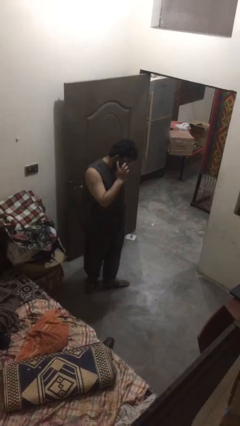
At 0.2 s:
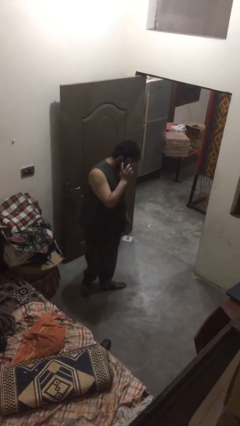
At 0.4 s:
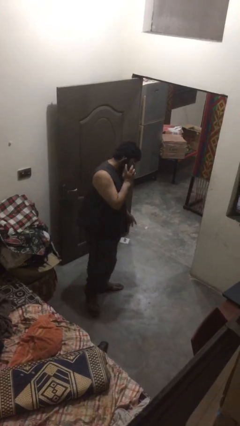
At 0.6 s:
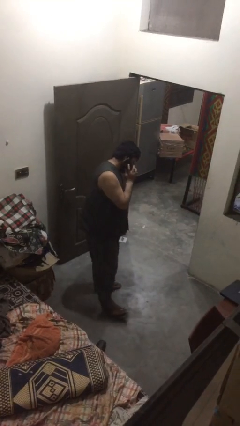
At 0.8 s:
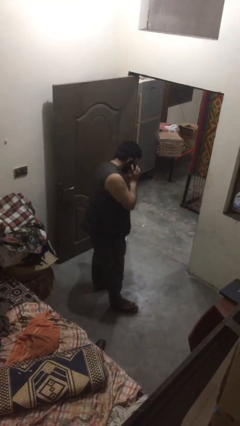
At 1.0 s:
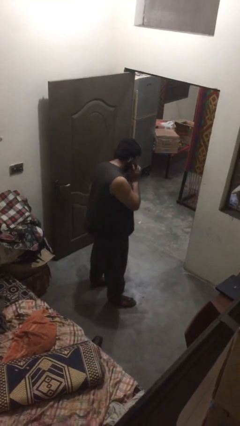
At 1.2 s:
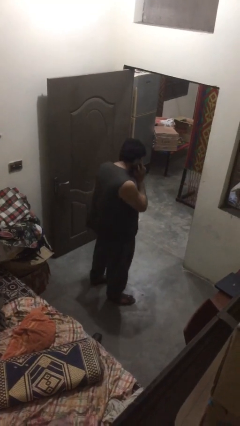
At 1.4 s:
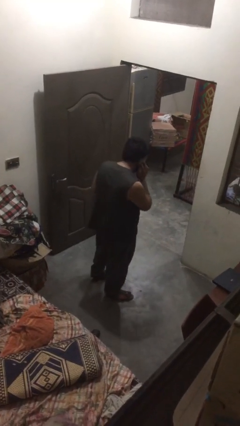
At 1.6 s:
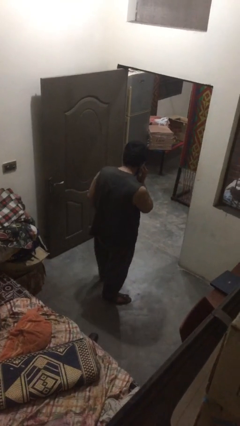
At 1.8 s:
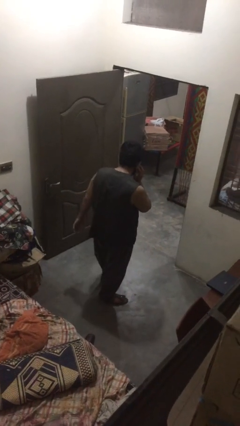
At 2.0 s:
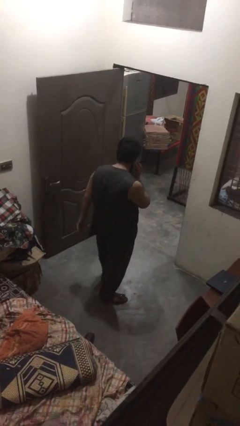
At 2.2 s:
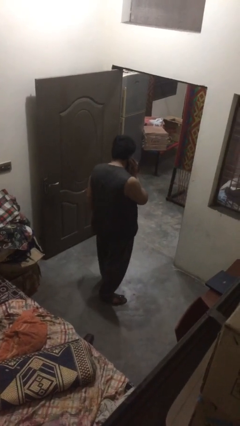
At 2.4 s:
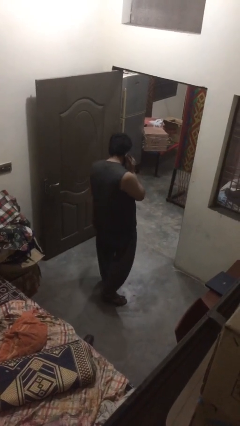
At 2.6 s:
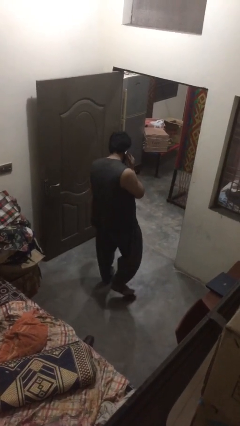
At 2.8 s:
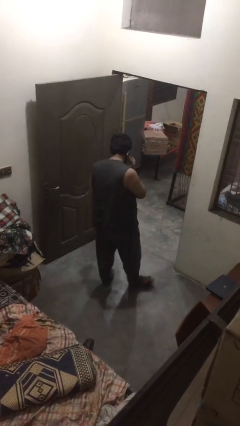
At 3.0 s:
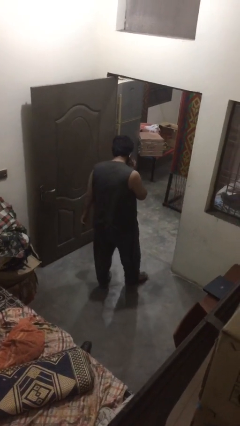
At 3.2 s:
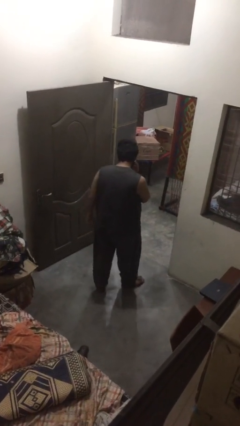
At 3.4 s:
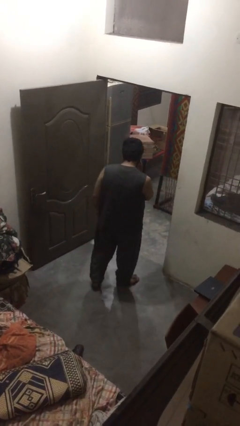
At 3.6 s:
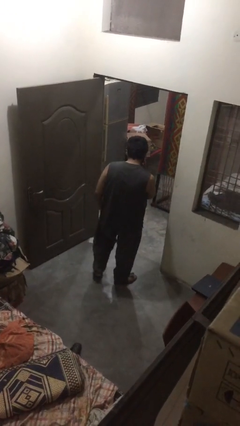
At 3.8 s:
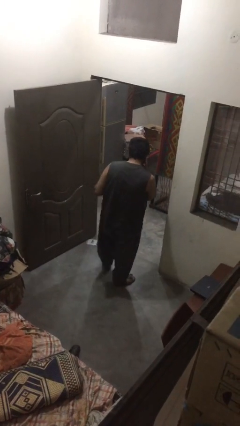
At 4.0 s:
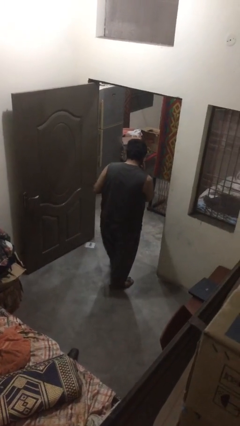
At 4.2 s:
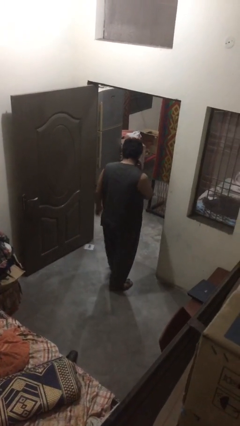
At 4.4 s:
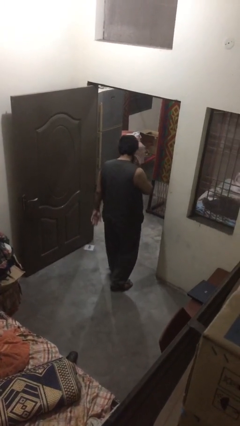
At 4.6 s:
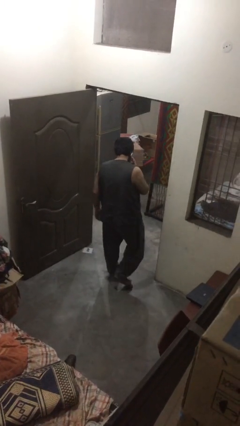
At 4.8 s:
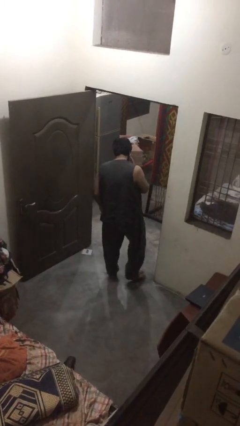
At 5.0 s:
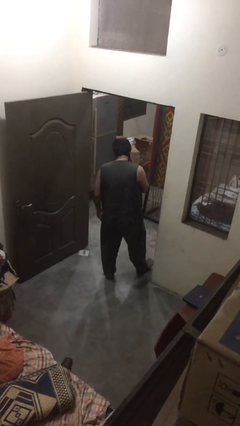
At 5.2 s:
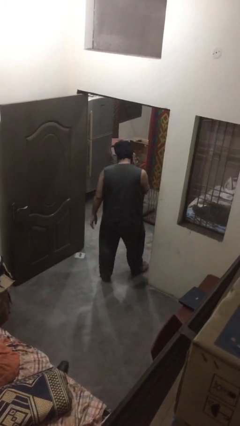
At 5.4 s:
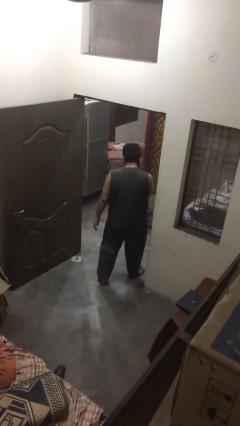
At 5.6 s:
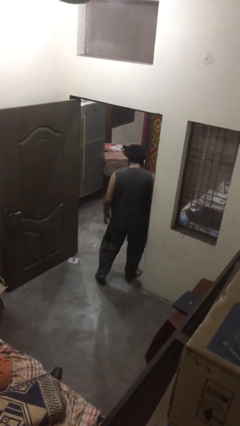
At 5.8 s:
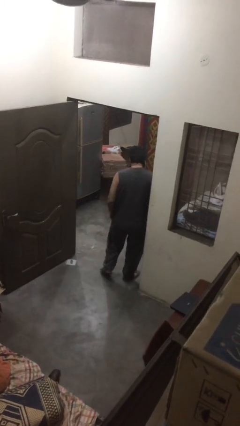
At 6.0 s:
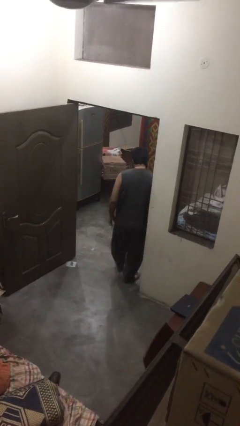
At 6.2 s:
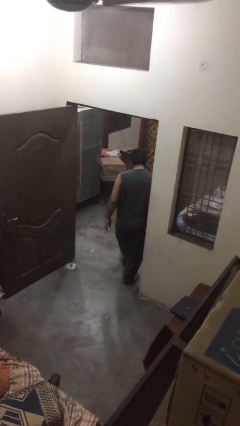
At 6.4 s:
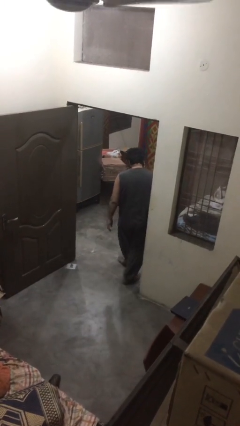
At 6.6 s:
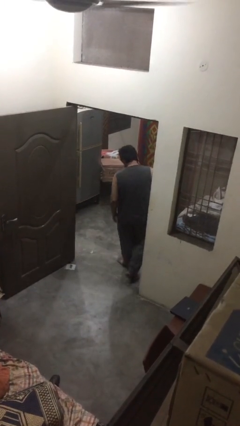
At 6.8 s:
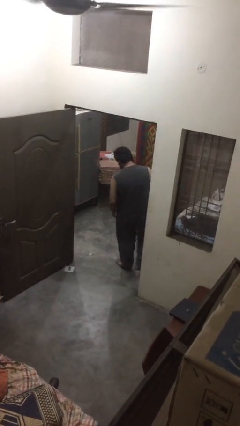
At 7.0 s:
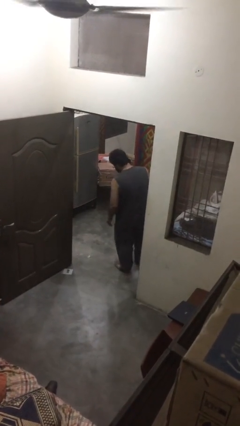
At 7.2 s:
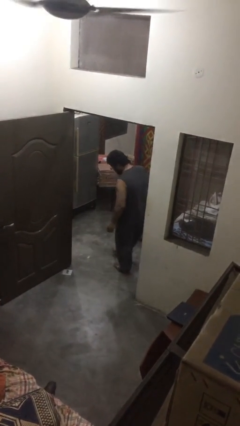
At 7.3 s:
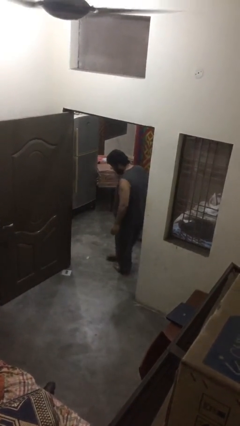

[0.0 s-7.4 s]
person talks on phone

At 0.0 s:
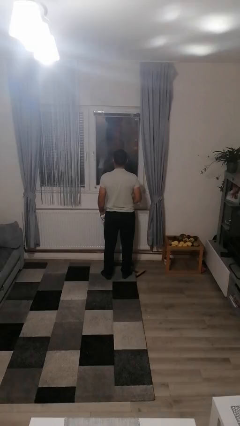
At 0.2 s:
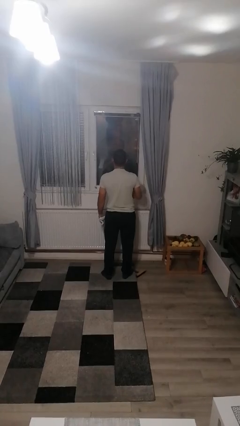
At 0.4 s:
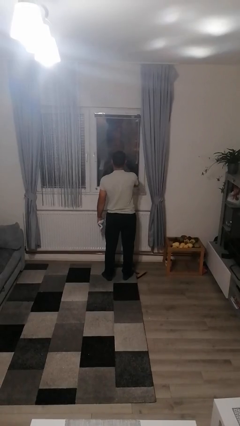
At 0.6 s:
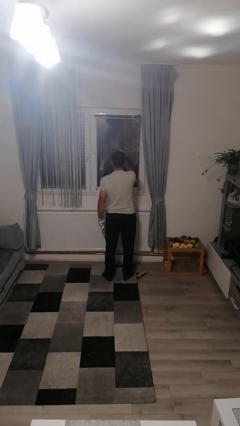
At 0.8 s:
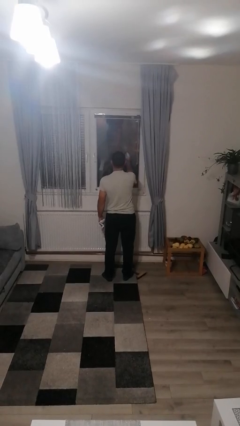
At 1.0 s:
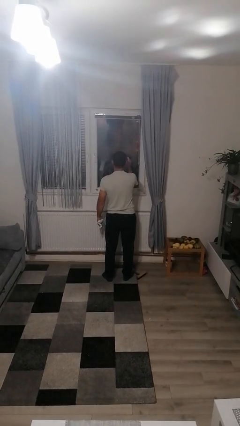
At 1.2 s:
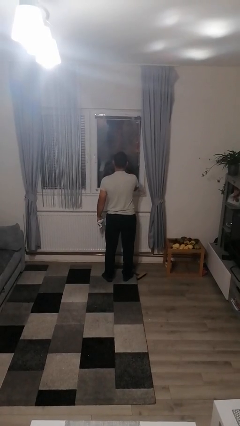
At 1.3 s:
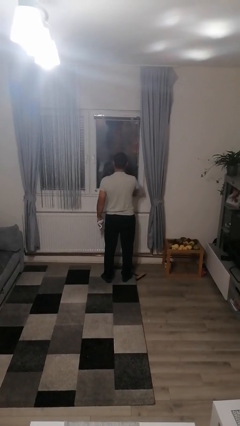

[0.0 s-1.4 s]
person sprays from bottle

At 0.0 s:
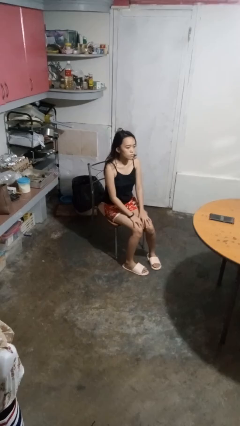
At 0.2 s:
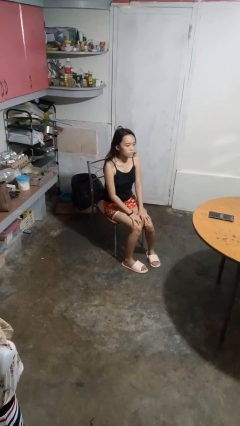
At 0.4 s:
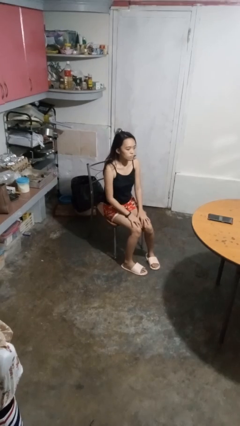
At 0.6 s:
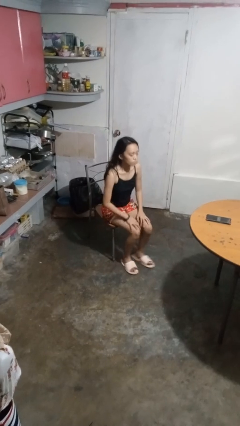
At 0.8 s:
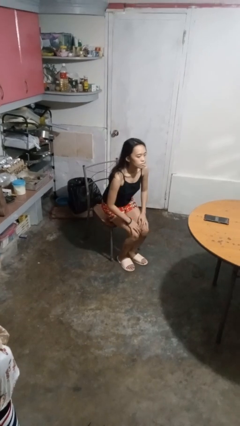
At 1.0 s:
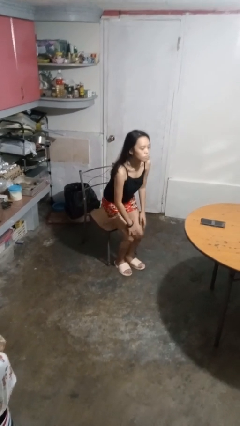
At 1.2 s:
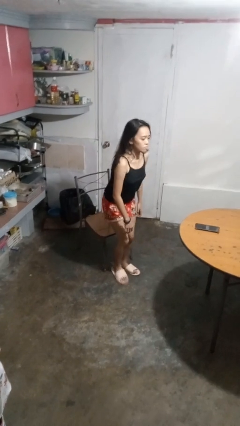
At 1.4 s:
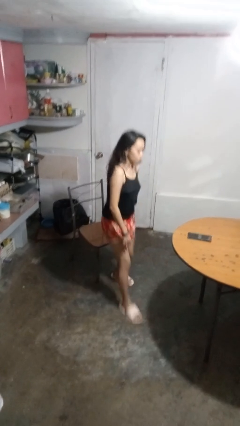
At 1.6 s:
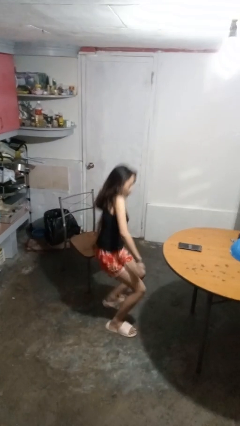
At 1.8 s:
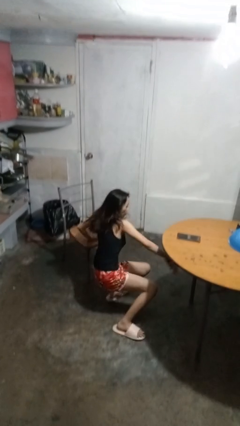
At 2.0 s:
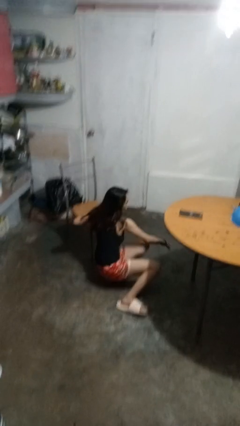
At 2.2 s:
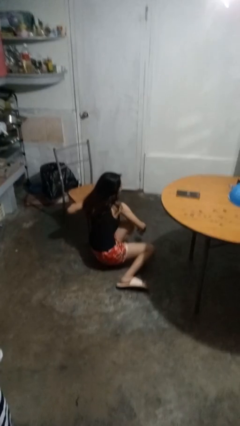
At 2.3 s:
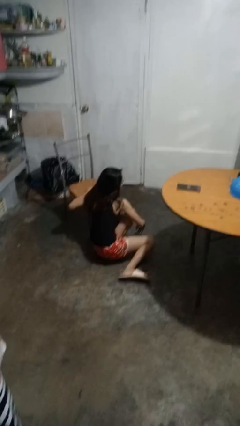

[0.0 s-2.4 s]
person falls from chair

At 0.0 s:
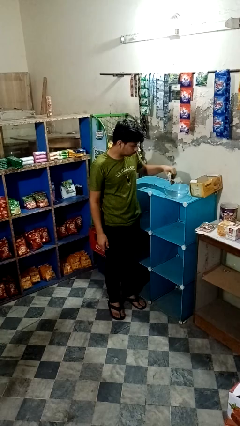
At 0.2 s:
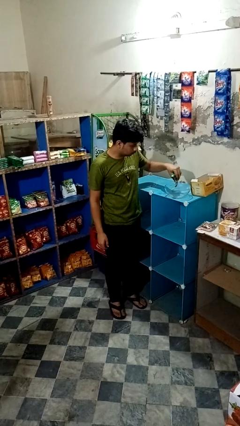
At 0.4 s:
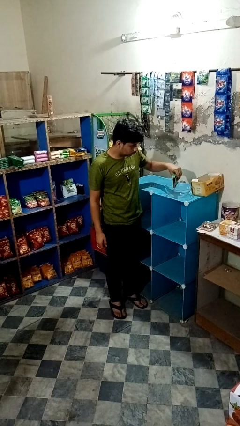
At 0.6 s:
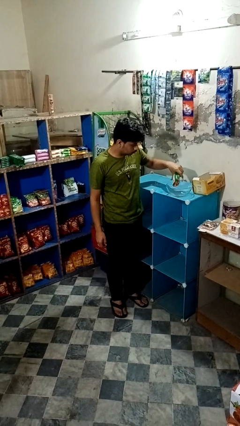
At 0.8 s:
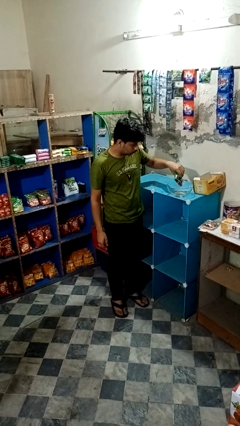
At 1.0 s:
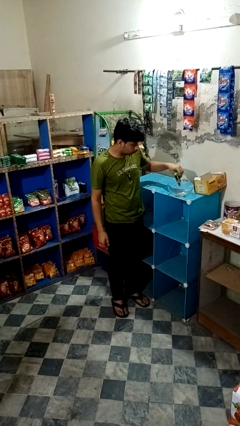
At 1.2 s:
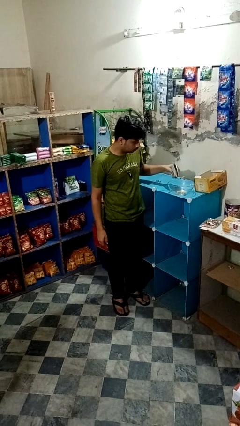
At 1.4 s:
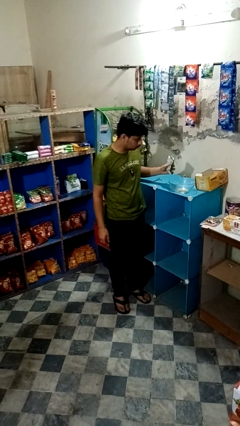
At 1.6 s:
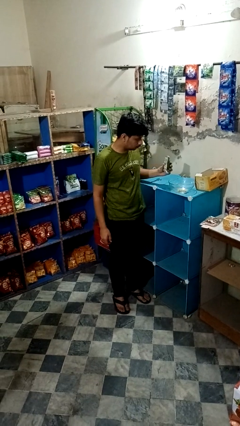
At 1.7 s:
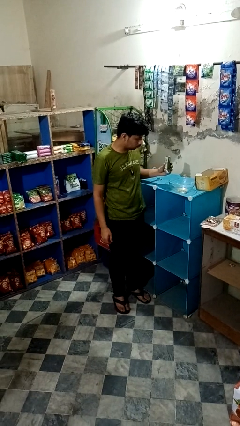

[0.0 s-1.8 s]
person pours into bowl

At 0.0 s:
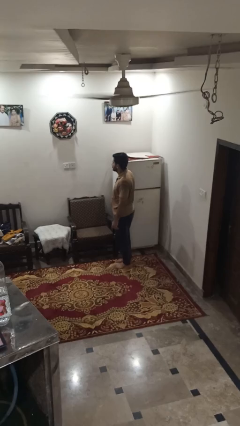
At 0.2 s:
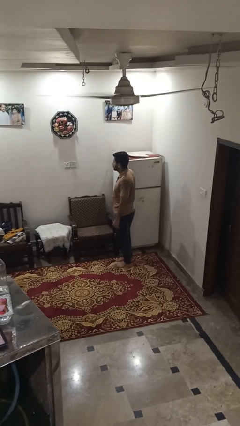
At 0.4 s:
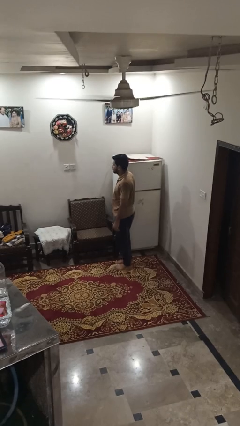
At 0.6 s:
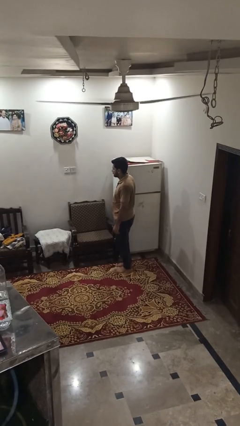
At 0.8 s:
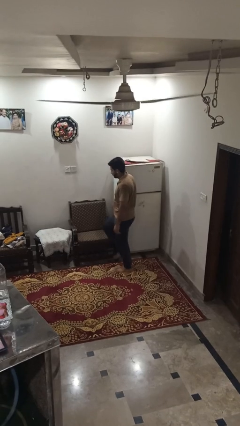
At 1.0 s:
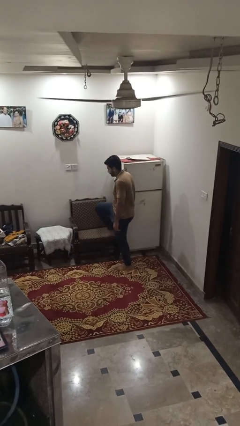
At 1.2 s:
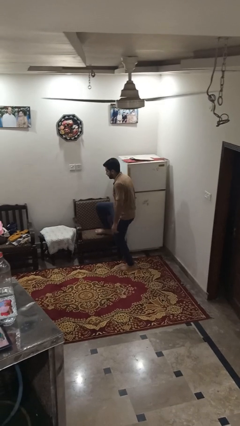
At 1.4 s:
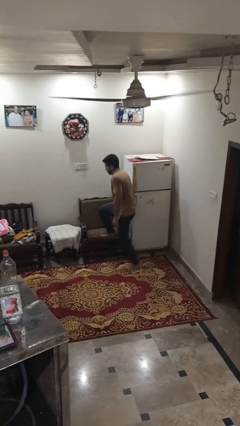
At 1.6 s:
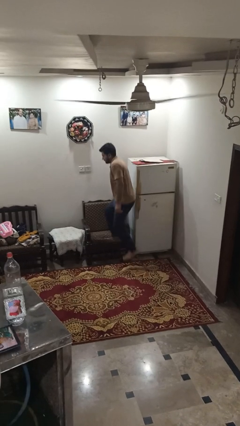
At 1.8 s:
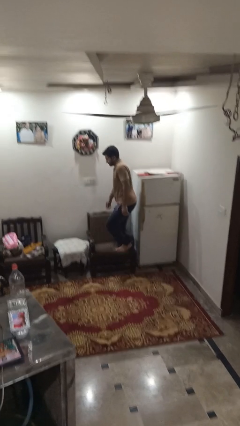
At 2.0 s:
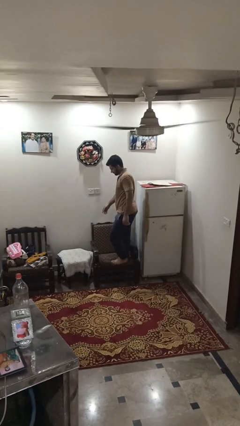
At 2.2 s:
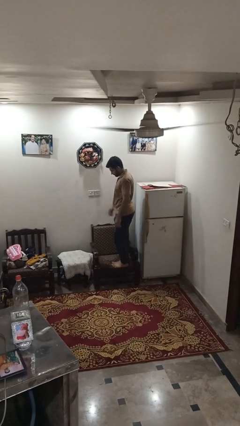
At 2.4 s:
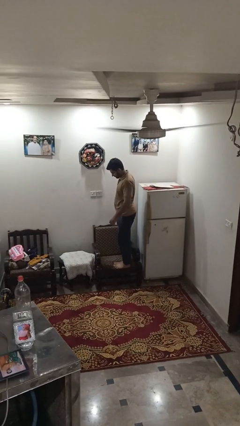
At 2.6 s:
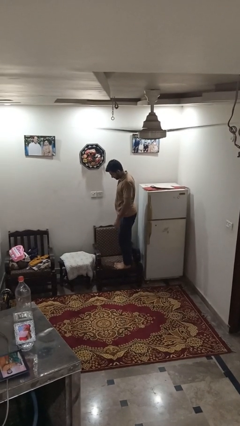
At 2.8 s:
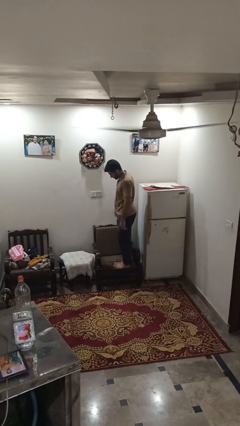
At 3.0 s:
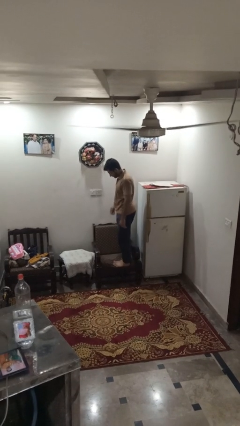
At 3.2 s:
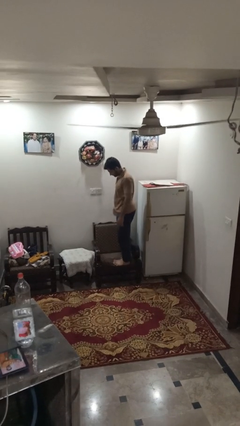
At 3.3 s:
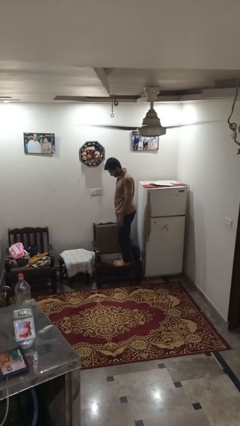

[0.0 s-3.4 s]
person climbs on couch

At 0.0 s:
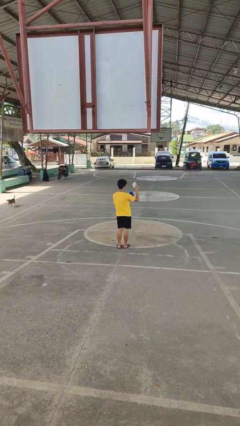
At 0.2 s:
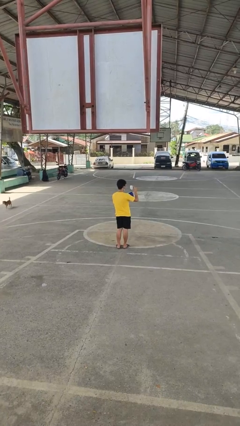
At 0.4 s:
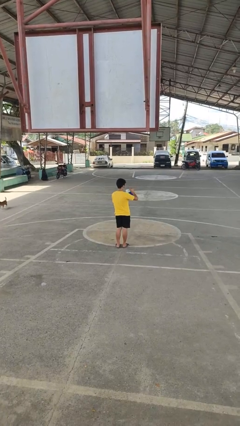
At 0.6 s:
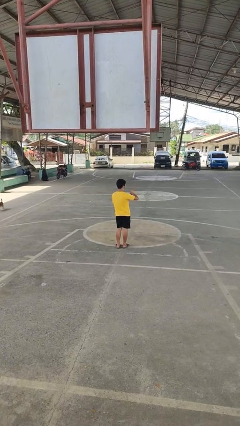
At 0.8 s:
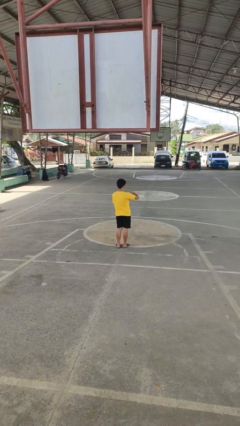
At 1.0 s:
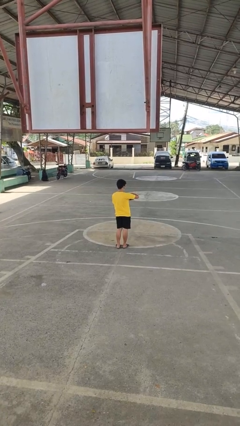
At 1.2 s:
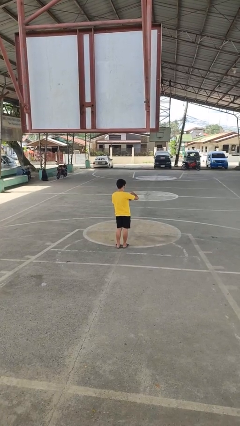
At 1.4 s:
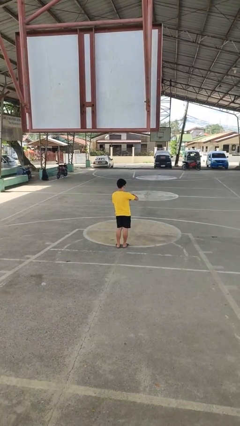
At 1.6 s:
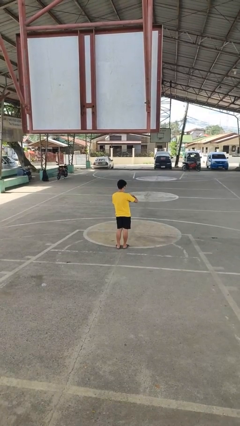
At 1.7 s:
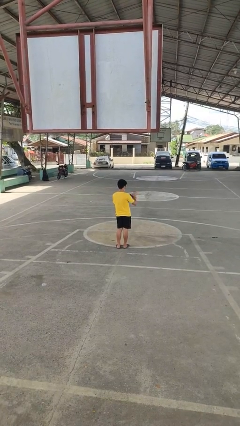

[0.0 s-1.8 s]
person puts object into purse
